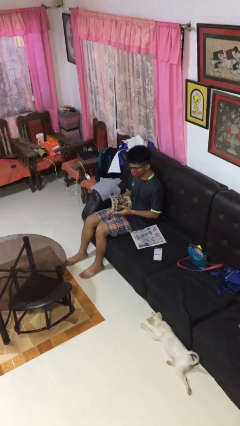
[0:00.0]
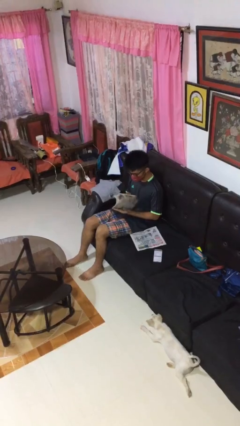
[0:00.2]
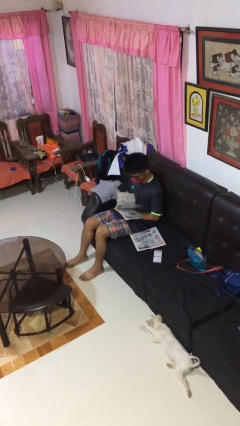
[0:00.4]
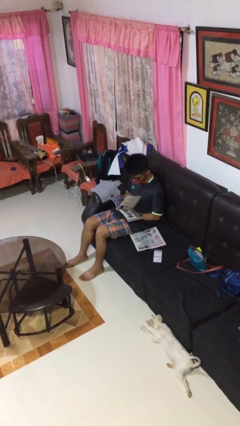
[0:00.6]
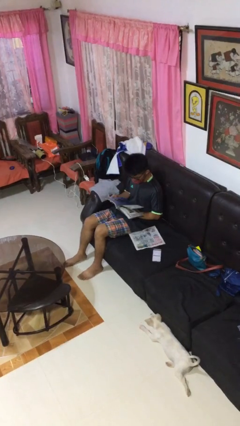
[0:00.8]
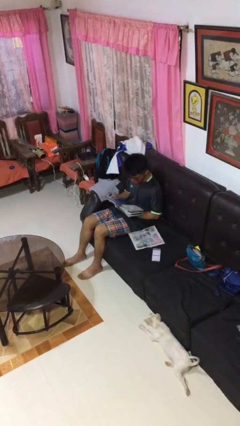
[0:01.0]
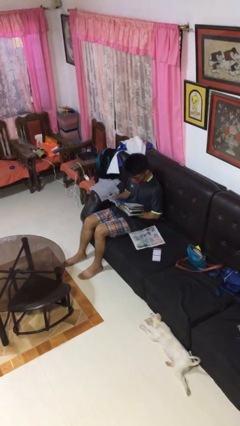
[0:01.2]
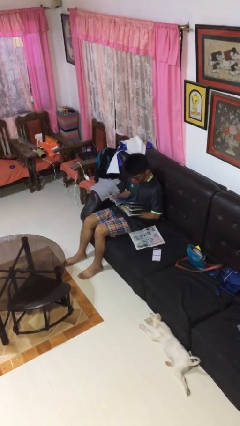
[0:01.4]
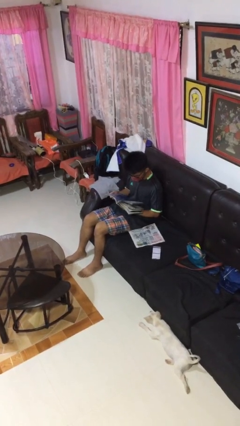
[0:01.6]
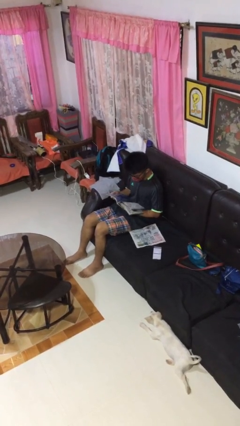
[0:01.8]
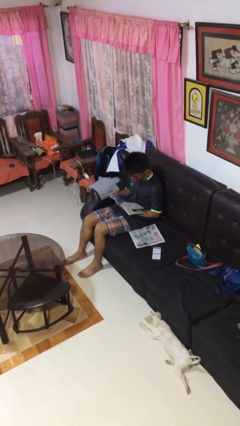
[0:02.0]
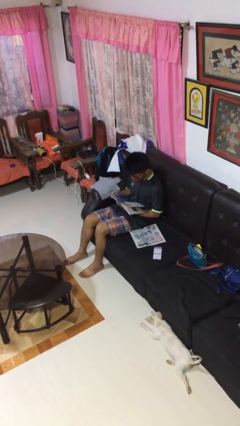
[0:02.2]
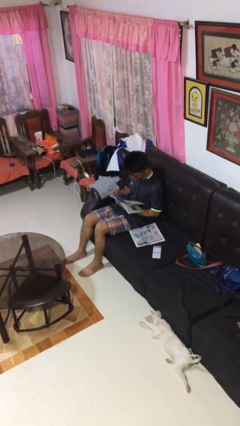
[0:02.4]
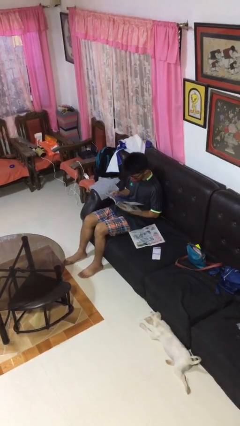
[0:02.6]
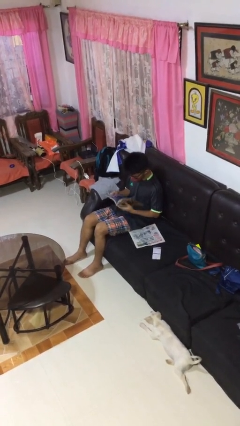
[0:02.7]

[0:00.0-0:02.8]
person reads magazine

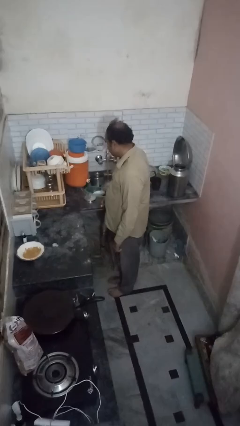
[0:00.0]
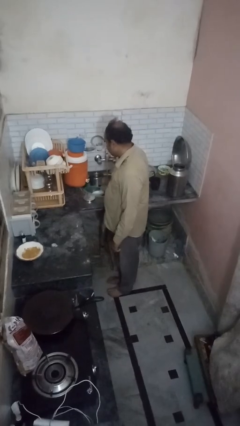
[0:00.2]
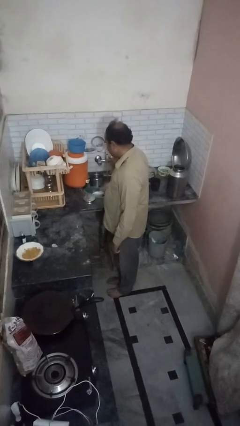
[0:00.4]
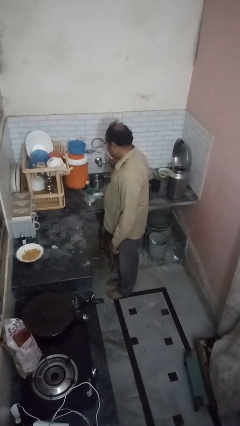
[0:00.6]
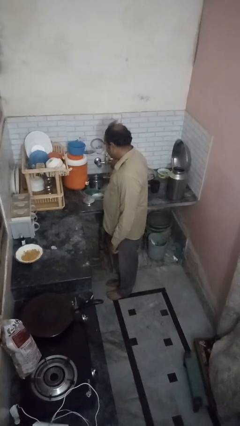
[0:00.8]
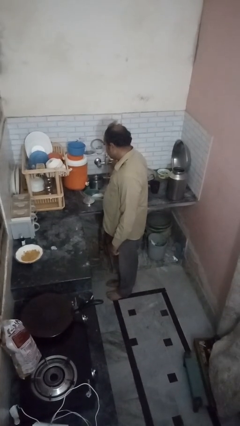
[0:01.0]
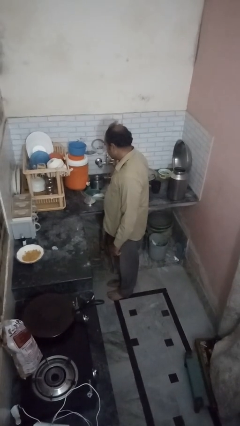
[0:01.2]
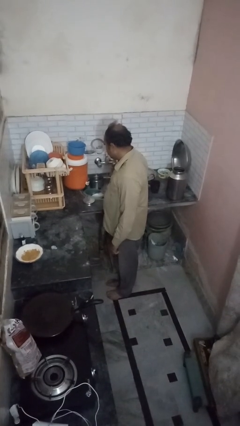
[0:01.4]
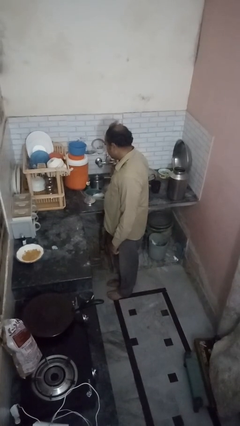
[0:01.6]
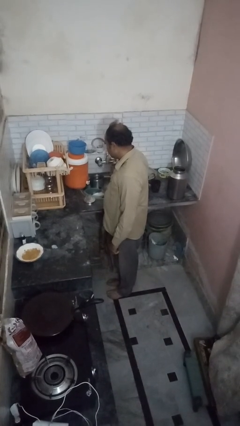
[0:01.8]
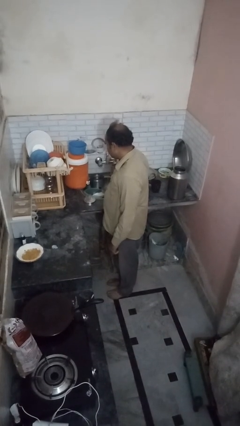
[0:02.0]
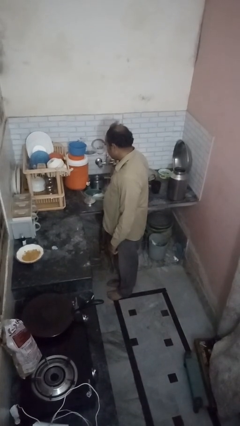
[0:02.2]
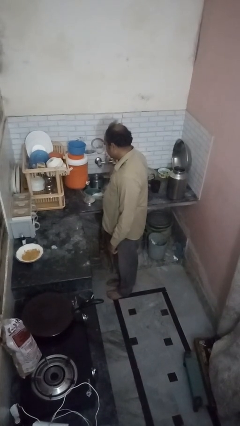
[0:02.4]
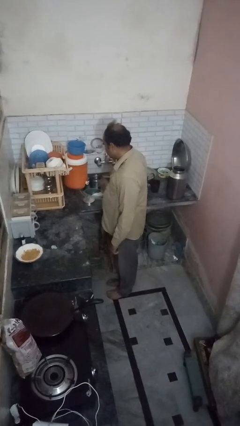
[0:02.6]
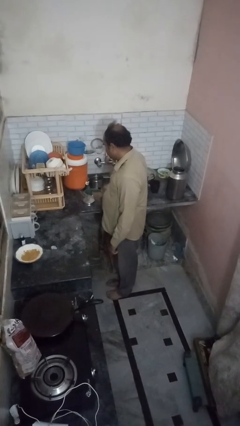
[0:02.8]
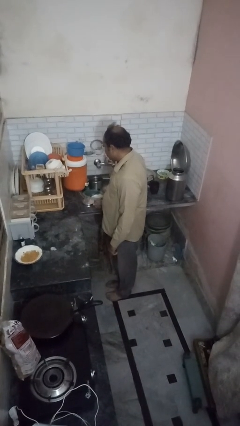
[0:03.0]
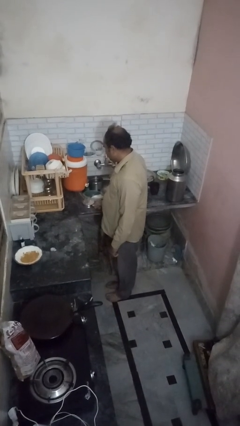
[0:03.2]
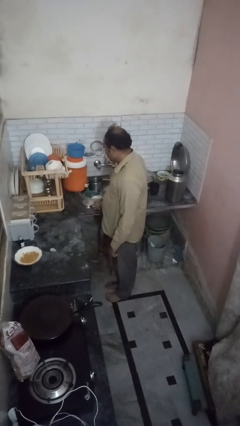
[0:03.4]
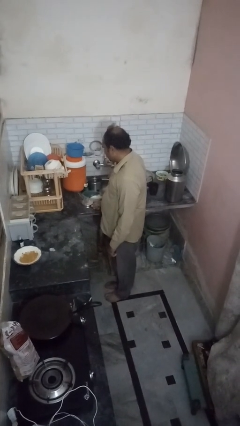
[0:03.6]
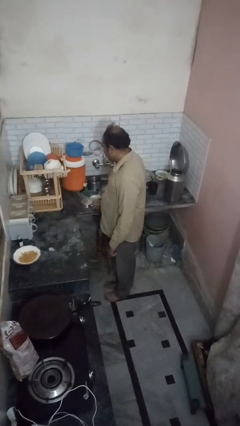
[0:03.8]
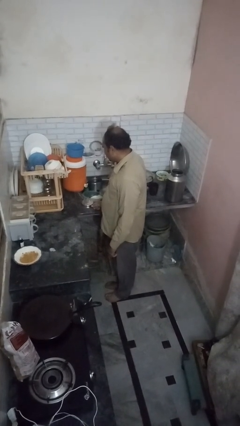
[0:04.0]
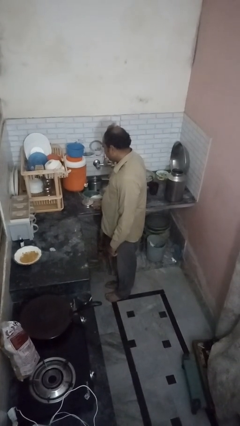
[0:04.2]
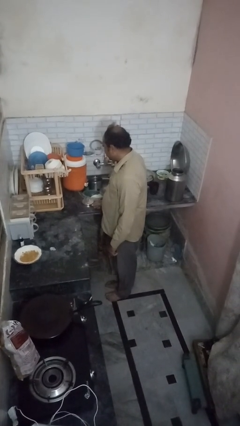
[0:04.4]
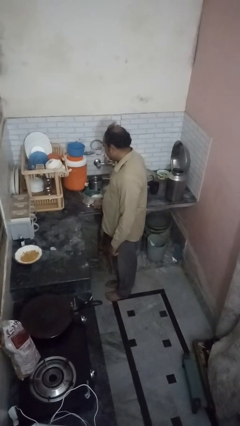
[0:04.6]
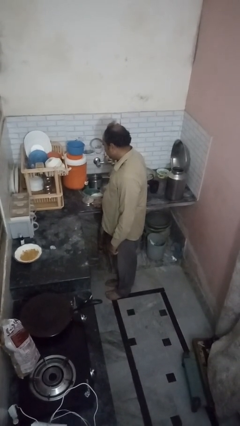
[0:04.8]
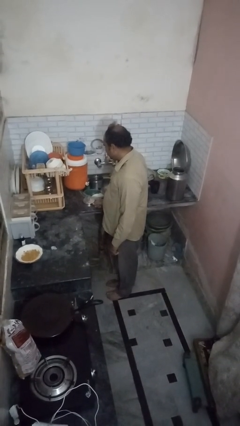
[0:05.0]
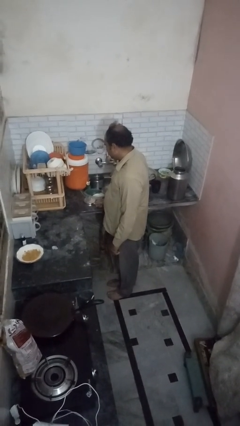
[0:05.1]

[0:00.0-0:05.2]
person closes dishwasher

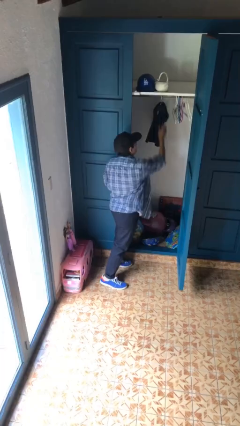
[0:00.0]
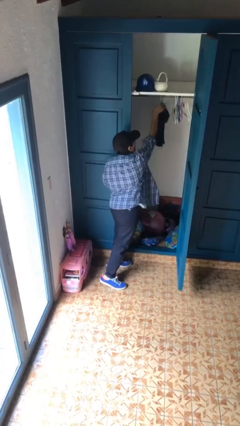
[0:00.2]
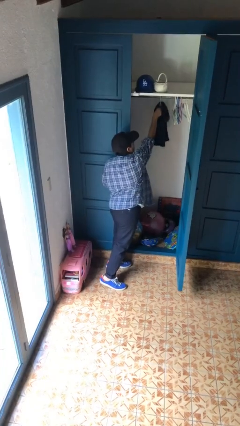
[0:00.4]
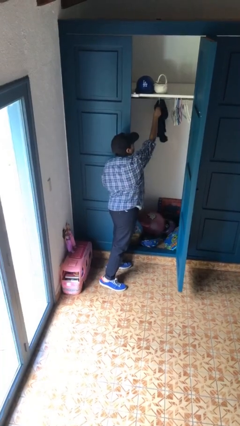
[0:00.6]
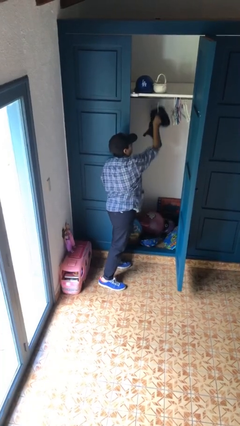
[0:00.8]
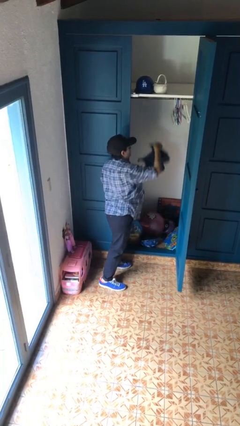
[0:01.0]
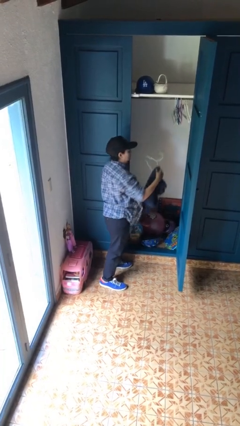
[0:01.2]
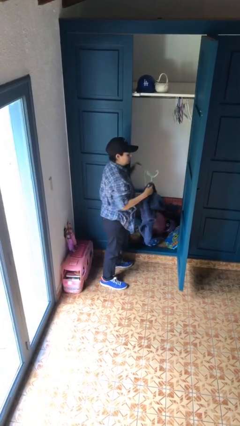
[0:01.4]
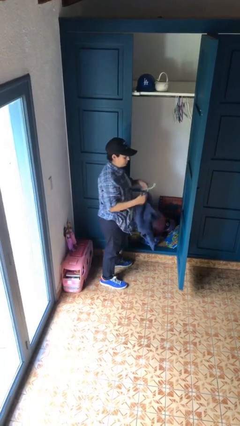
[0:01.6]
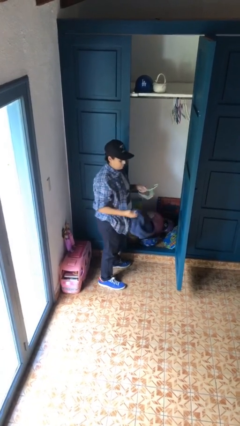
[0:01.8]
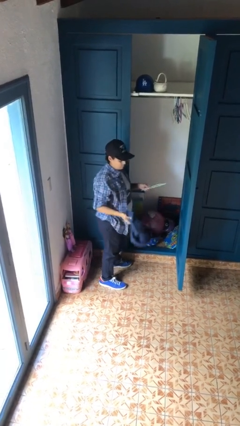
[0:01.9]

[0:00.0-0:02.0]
person takes clothes from closet

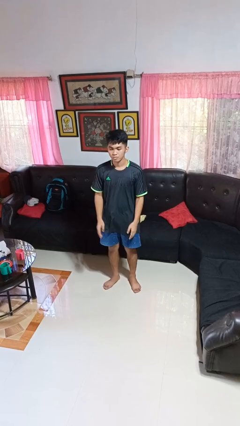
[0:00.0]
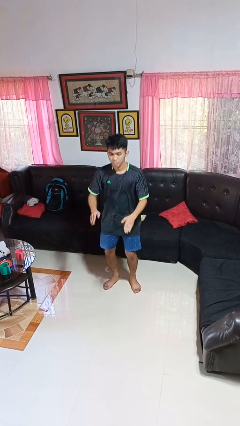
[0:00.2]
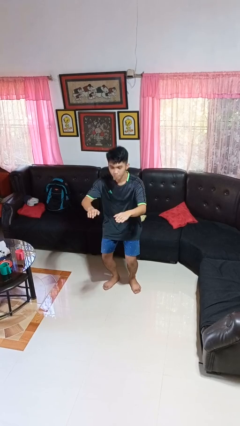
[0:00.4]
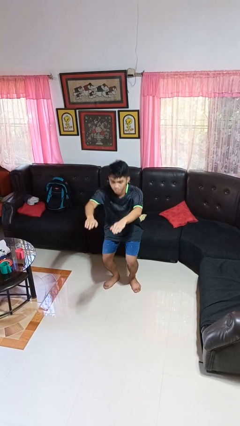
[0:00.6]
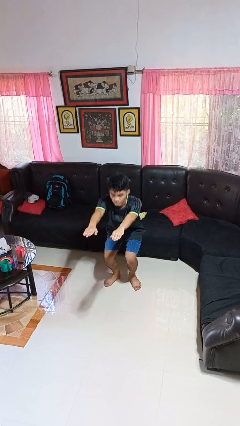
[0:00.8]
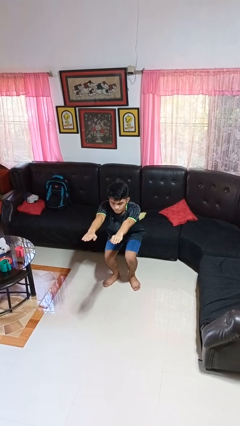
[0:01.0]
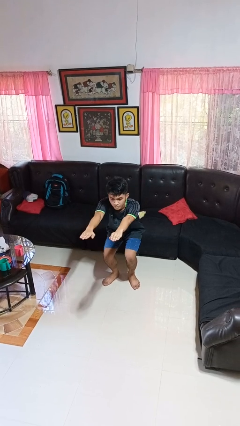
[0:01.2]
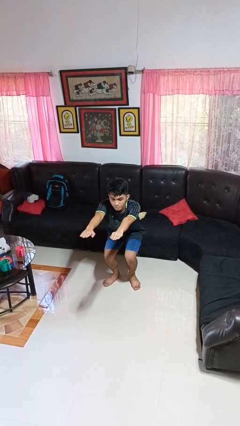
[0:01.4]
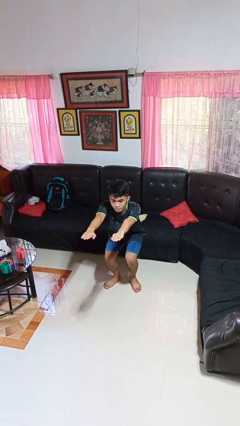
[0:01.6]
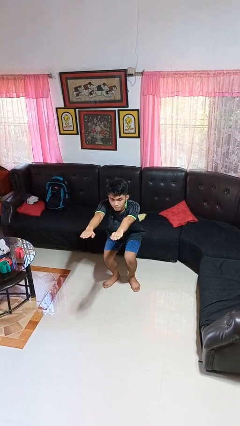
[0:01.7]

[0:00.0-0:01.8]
person squats

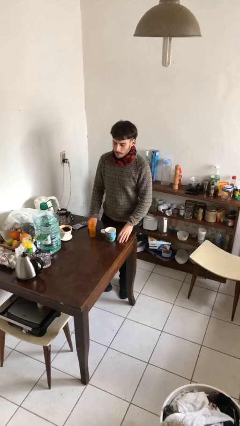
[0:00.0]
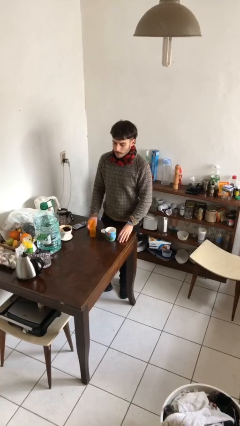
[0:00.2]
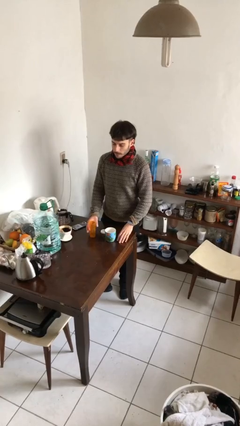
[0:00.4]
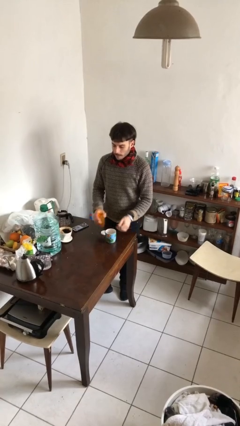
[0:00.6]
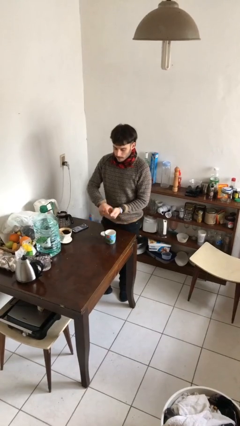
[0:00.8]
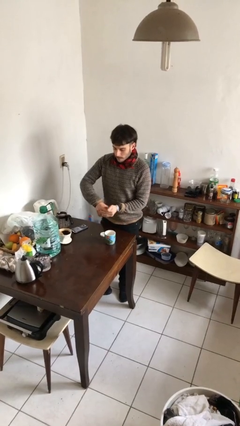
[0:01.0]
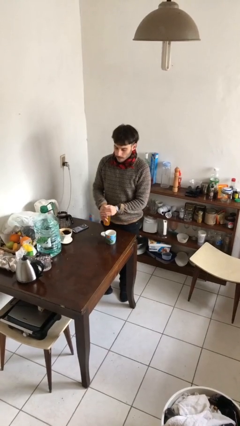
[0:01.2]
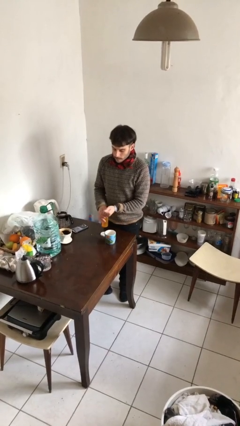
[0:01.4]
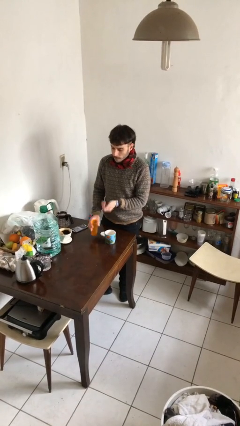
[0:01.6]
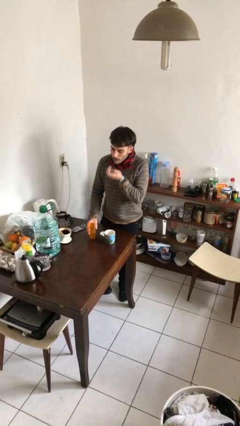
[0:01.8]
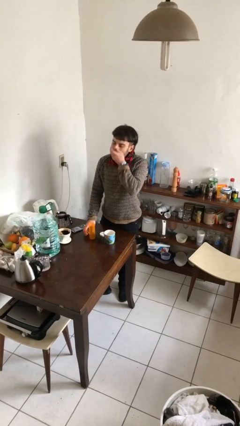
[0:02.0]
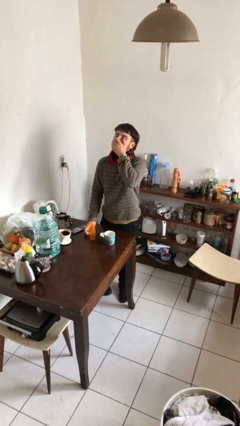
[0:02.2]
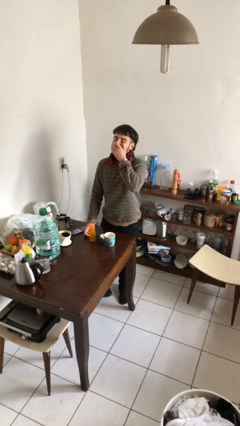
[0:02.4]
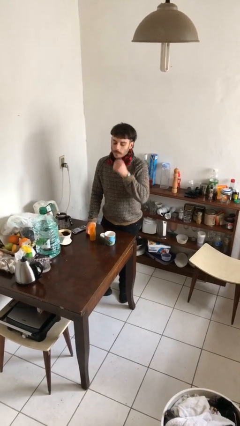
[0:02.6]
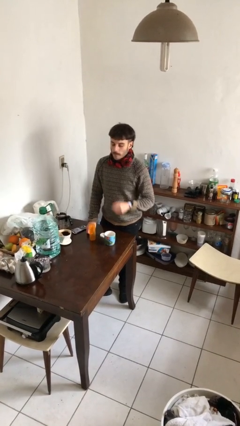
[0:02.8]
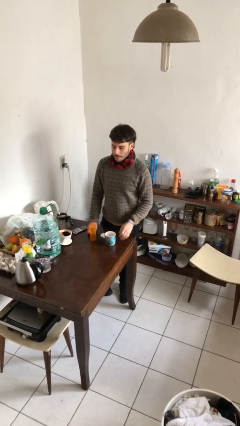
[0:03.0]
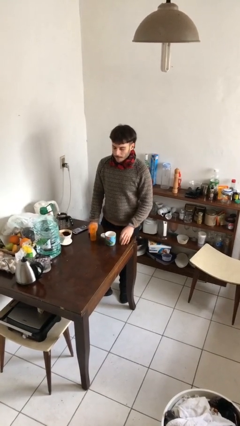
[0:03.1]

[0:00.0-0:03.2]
person takes medicine pills

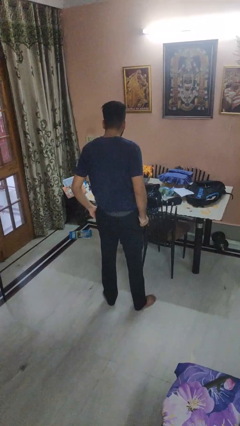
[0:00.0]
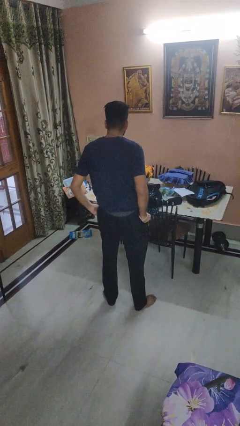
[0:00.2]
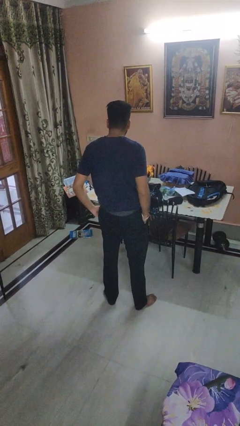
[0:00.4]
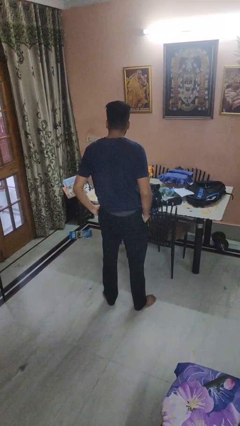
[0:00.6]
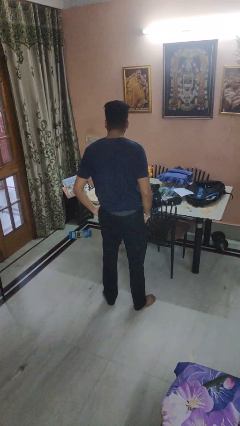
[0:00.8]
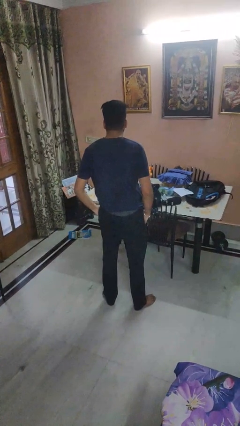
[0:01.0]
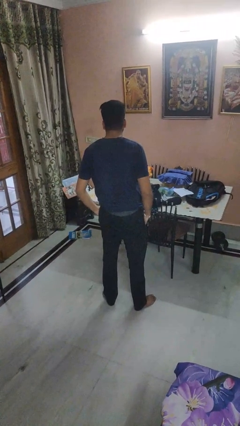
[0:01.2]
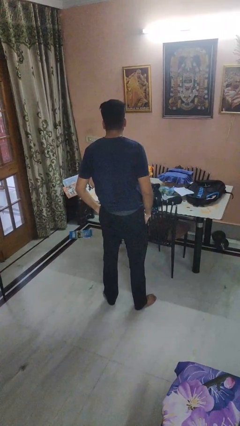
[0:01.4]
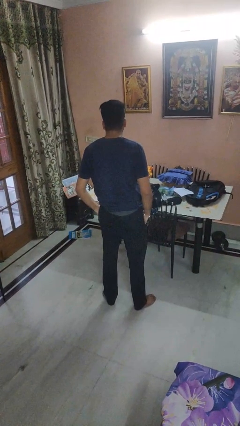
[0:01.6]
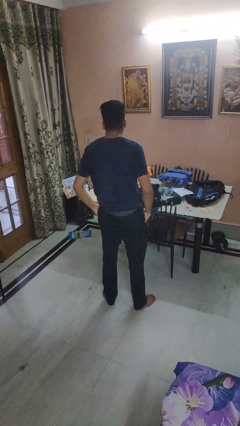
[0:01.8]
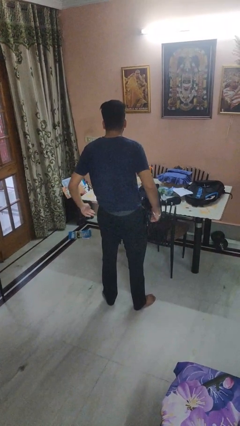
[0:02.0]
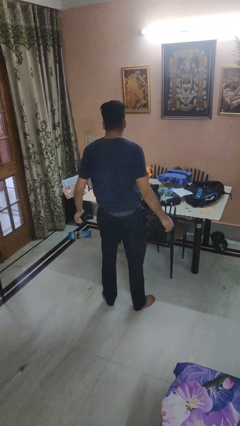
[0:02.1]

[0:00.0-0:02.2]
person puts hands in back pockets

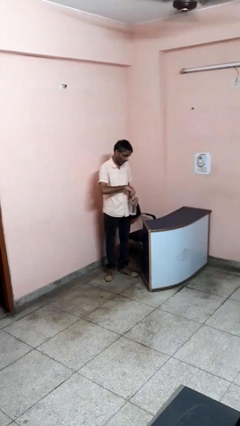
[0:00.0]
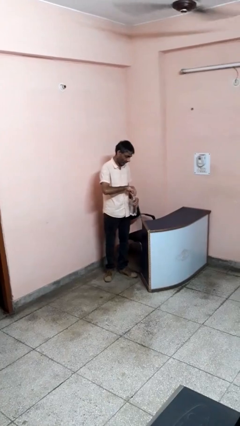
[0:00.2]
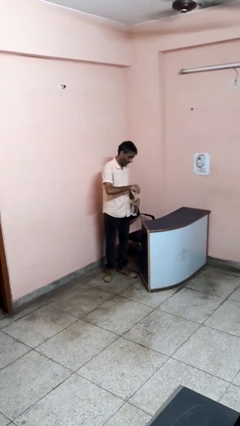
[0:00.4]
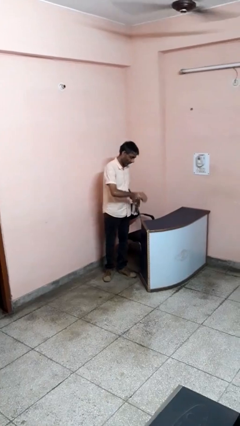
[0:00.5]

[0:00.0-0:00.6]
person unscrews lid from bottle
